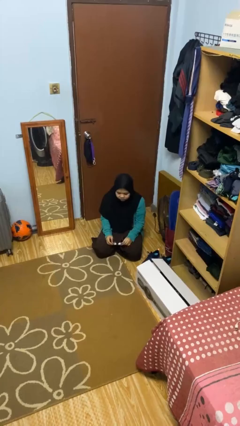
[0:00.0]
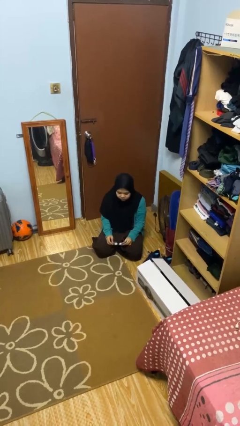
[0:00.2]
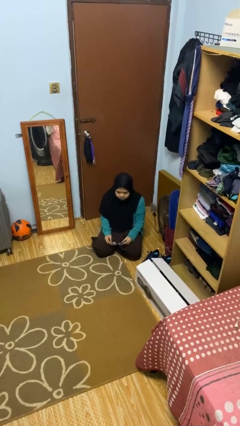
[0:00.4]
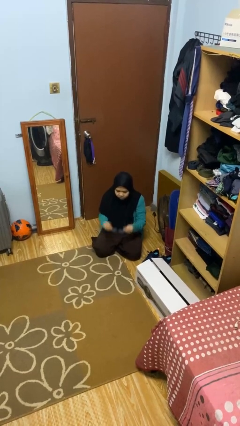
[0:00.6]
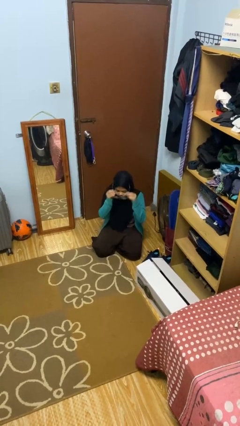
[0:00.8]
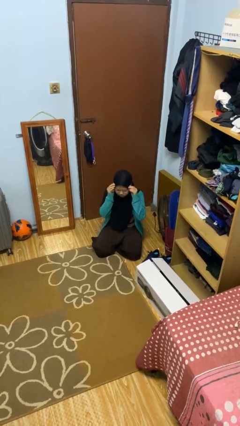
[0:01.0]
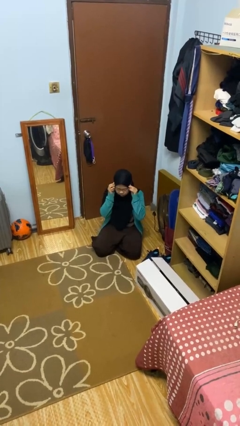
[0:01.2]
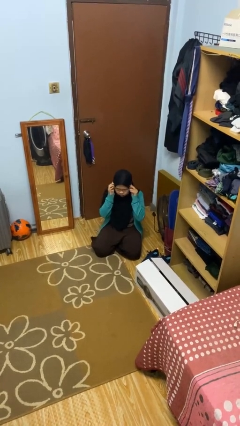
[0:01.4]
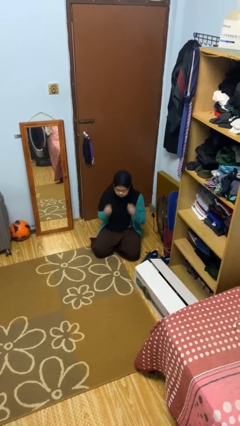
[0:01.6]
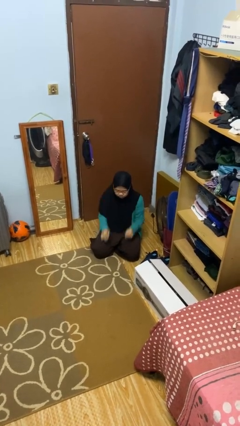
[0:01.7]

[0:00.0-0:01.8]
person puts on glasses

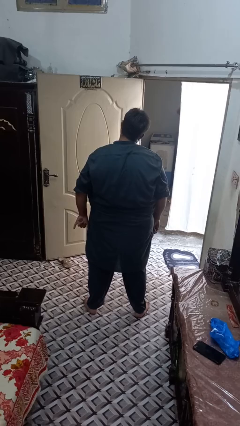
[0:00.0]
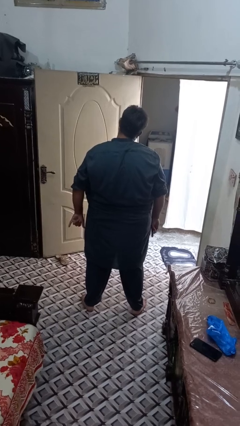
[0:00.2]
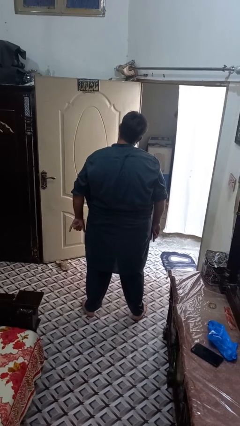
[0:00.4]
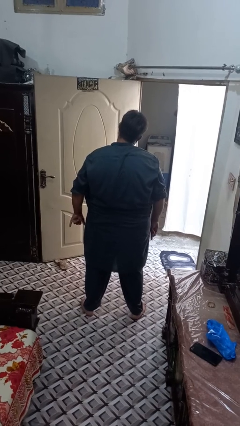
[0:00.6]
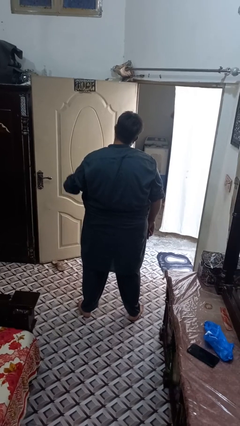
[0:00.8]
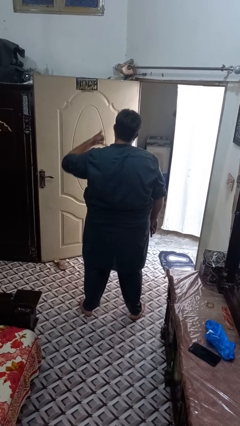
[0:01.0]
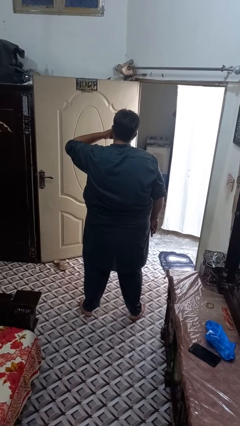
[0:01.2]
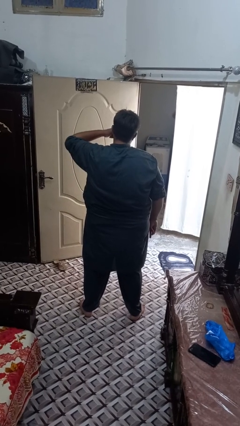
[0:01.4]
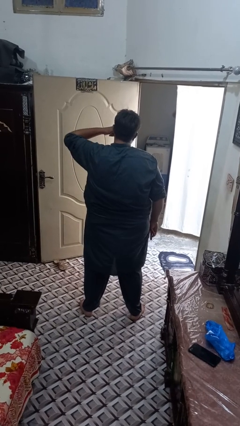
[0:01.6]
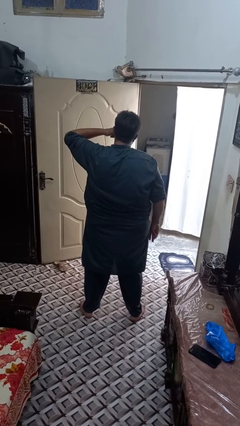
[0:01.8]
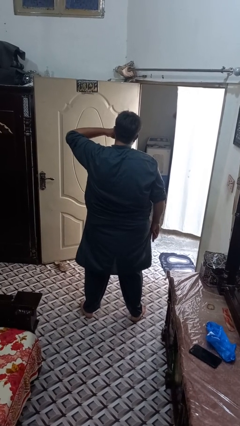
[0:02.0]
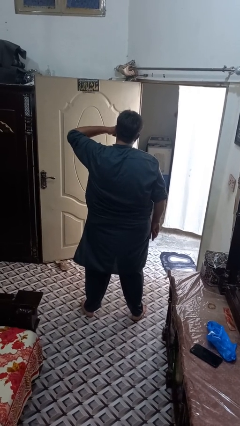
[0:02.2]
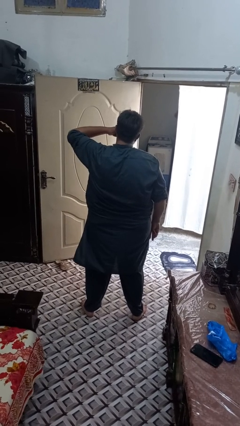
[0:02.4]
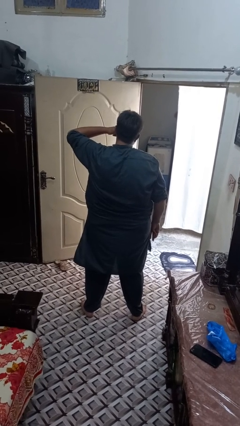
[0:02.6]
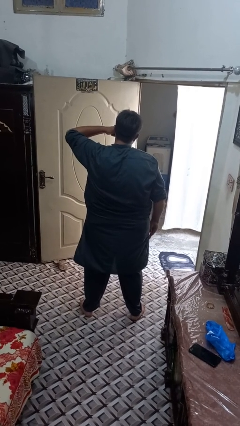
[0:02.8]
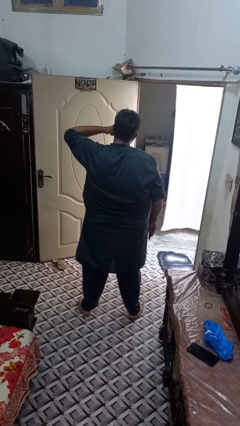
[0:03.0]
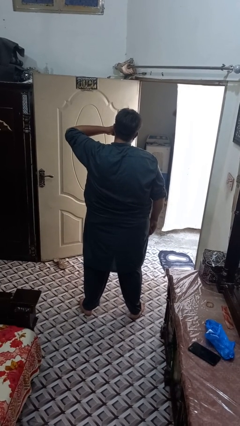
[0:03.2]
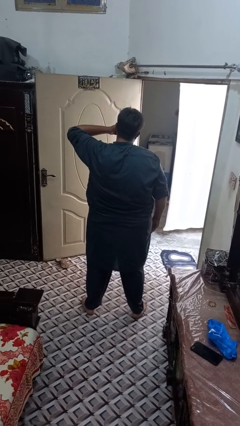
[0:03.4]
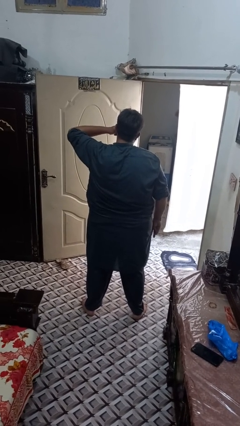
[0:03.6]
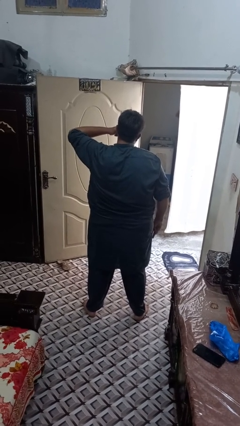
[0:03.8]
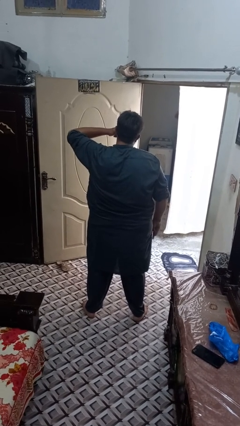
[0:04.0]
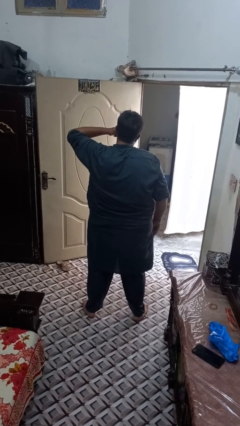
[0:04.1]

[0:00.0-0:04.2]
person gestures call me

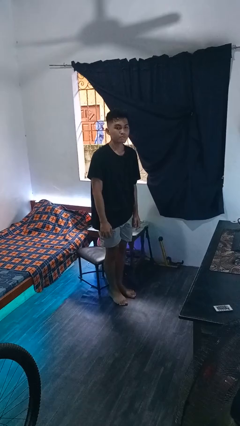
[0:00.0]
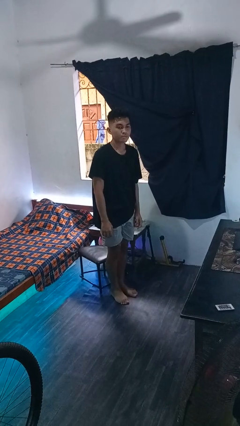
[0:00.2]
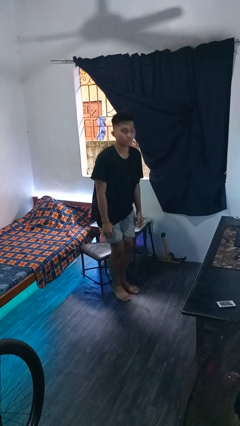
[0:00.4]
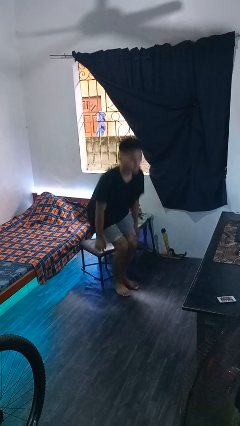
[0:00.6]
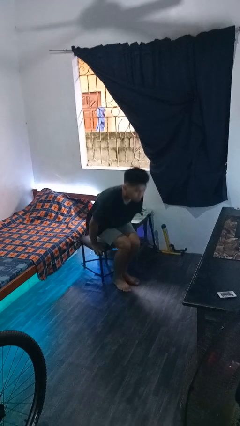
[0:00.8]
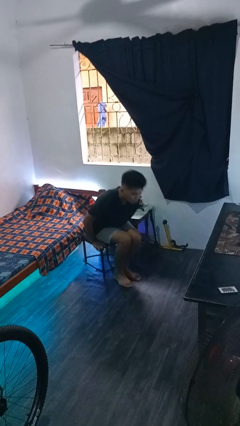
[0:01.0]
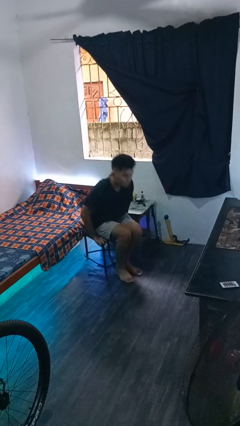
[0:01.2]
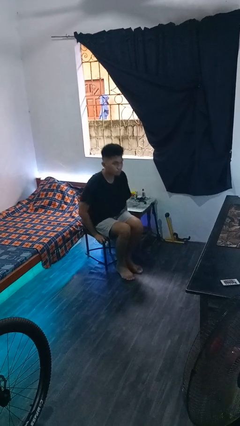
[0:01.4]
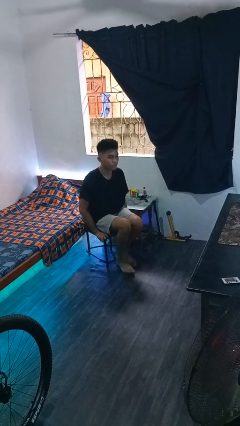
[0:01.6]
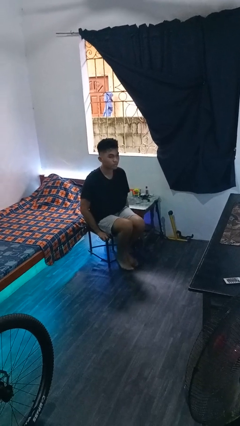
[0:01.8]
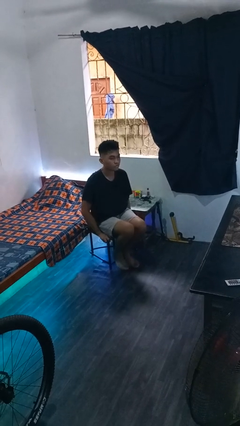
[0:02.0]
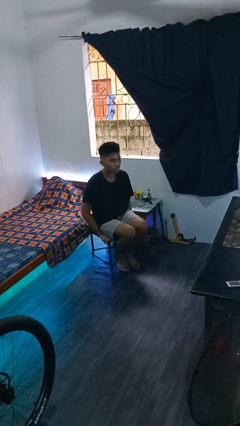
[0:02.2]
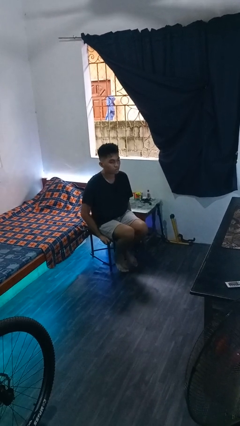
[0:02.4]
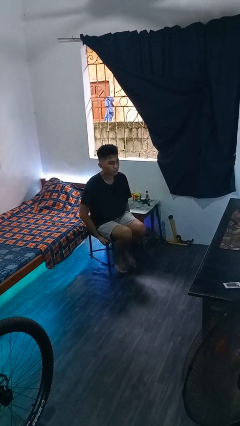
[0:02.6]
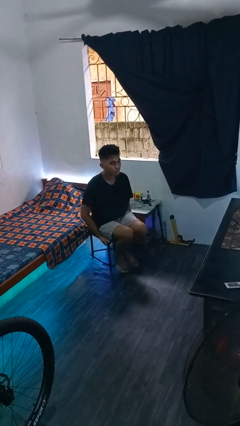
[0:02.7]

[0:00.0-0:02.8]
person sits down

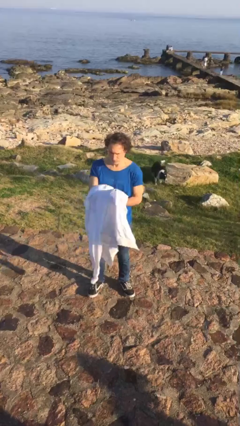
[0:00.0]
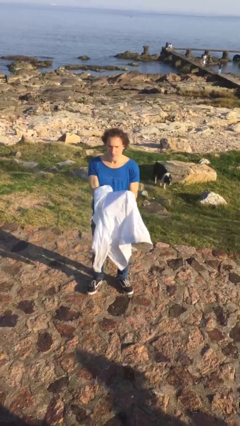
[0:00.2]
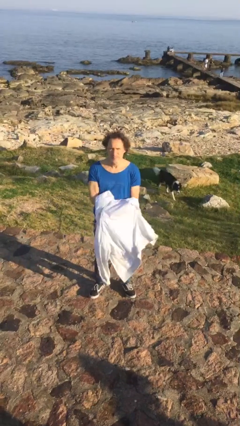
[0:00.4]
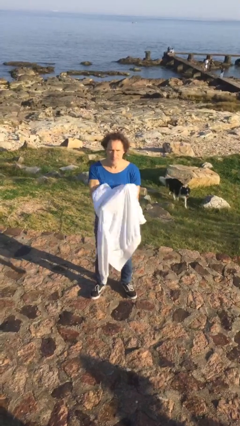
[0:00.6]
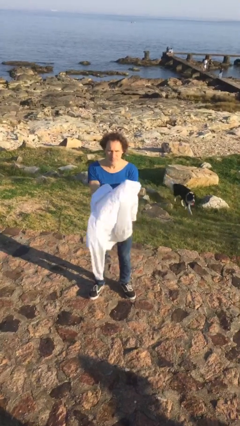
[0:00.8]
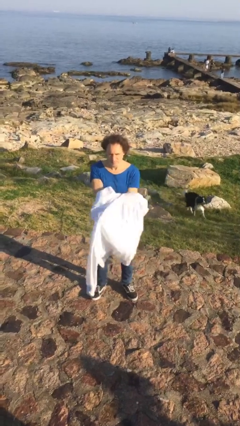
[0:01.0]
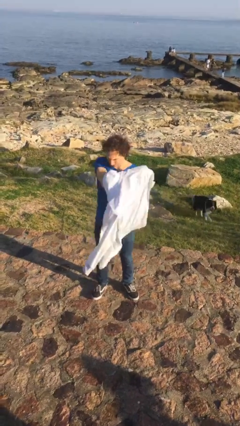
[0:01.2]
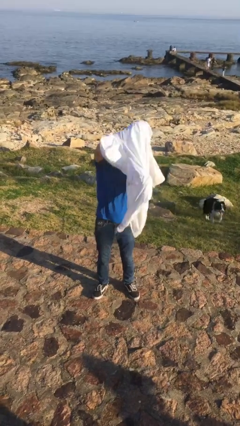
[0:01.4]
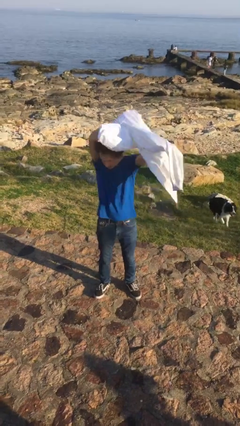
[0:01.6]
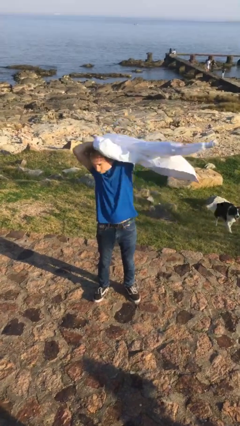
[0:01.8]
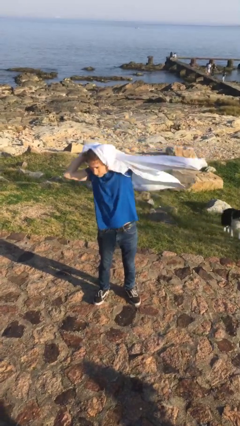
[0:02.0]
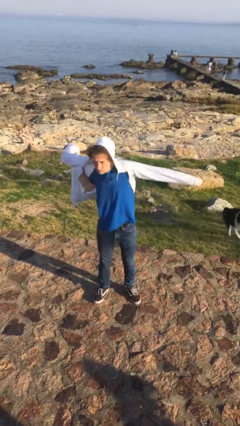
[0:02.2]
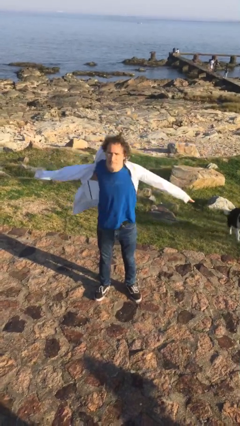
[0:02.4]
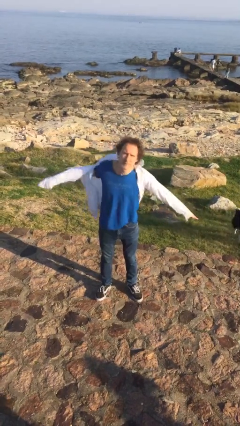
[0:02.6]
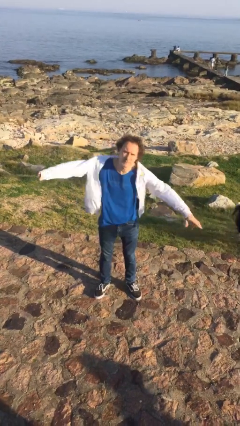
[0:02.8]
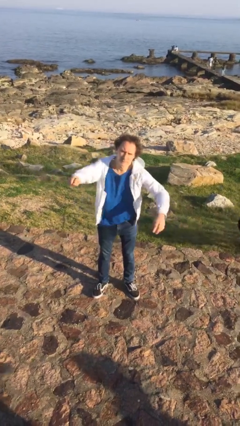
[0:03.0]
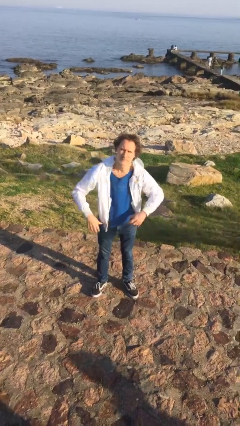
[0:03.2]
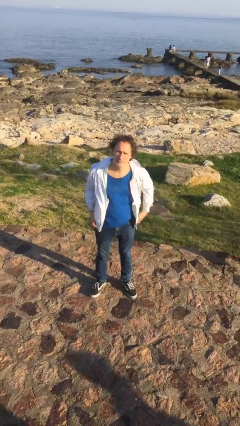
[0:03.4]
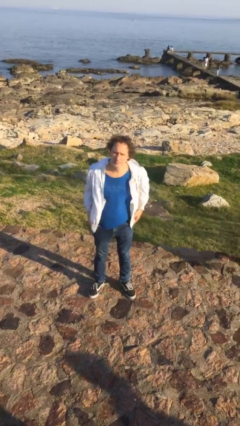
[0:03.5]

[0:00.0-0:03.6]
person puts on jacket

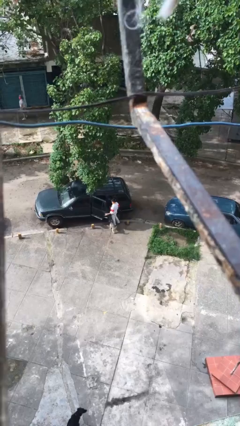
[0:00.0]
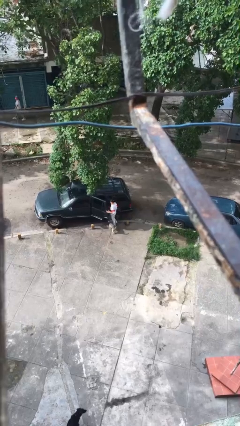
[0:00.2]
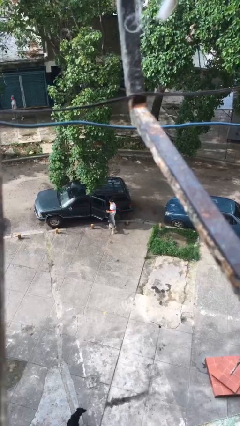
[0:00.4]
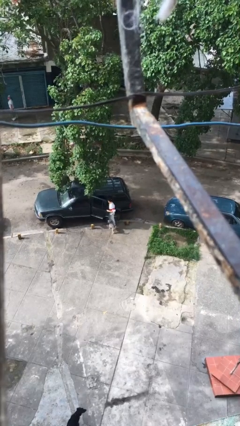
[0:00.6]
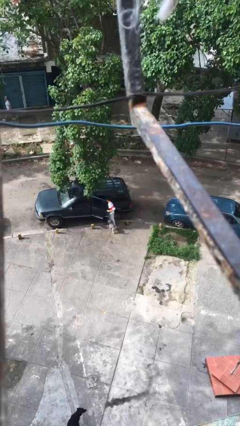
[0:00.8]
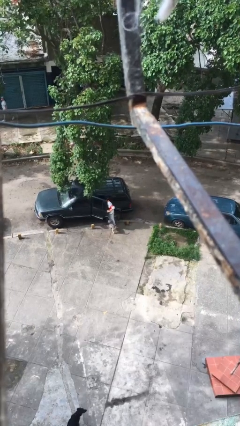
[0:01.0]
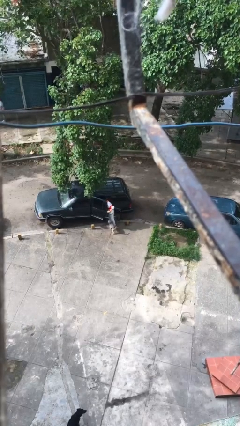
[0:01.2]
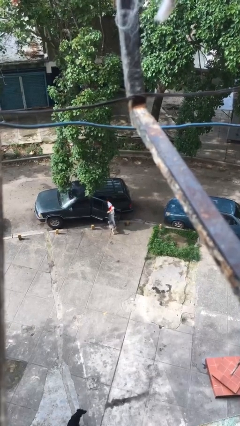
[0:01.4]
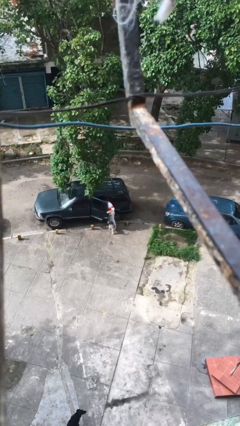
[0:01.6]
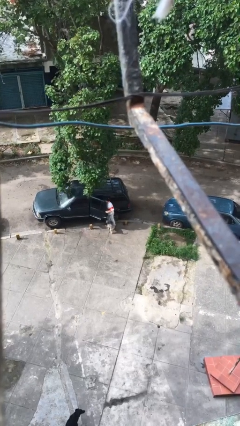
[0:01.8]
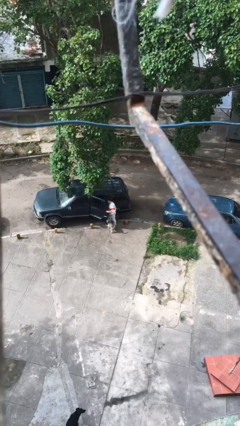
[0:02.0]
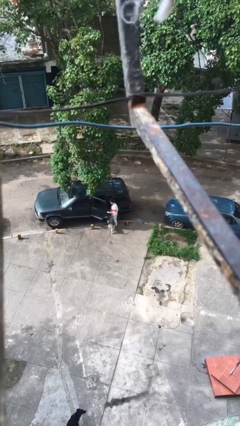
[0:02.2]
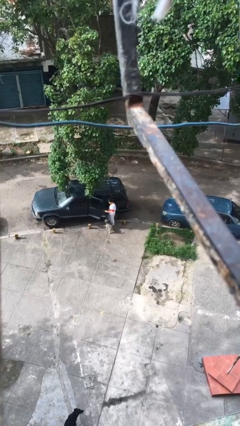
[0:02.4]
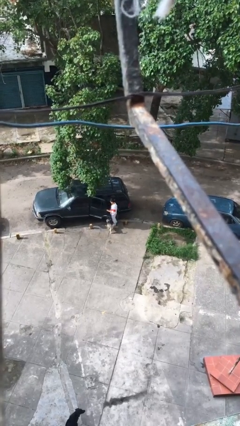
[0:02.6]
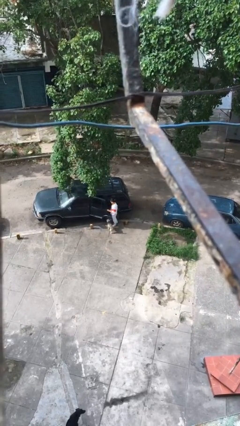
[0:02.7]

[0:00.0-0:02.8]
person loads car

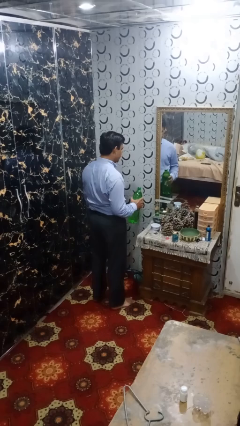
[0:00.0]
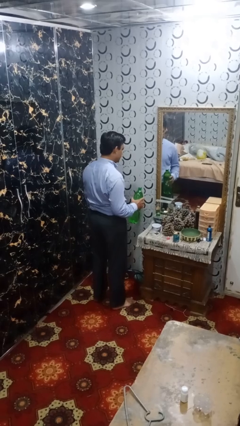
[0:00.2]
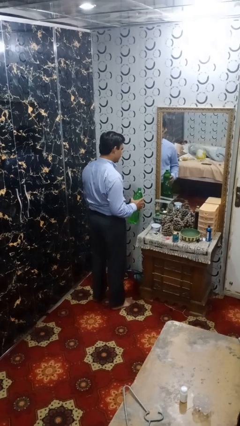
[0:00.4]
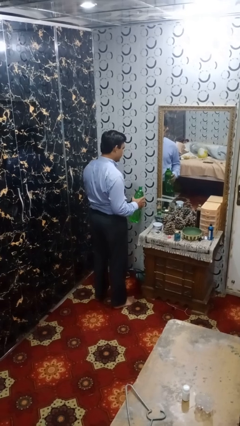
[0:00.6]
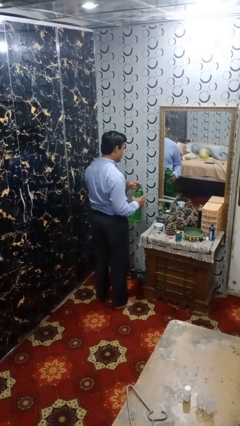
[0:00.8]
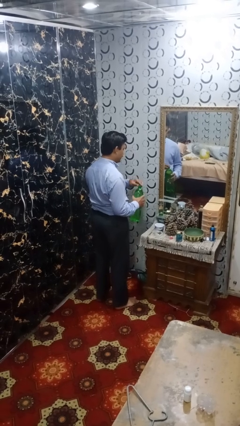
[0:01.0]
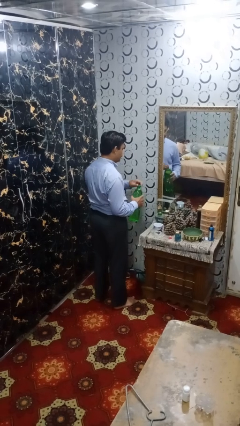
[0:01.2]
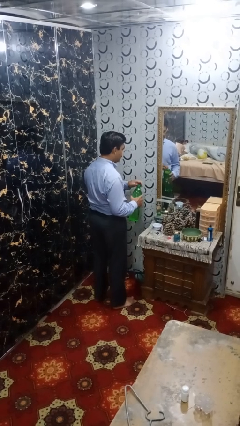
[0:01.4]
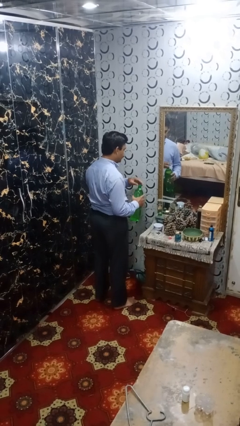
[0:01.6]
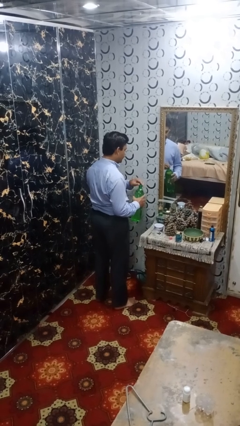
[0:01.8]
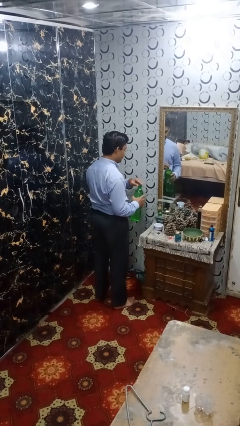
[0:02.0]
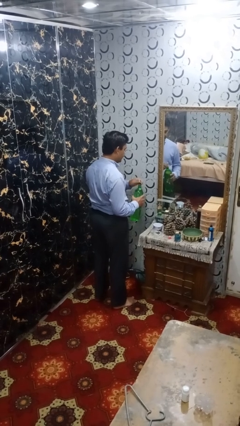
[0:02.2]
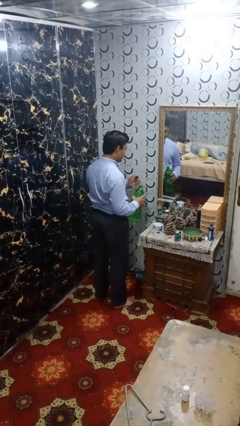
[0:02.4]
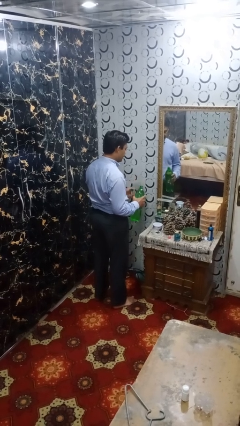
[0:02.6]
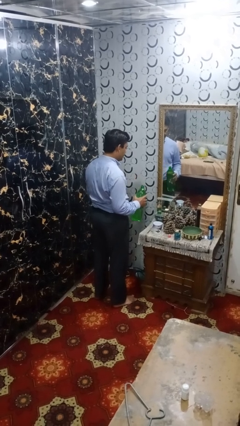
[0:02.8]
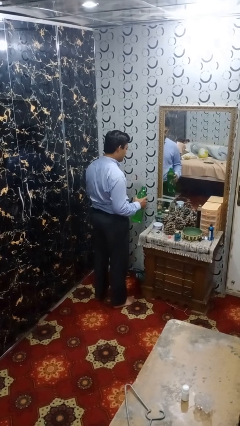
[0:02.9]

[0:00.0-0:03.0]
person unscrews lid from bottle
